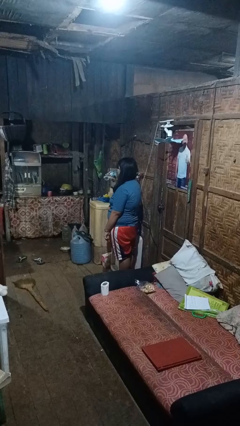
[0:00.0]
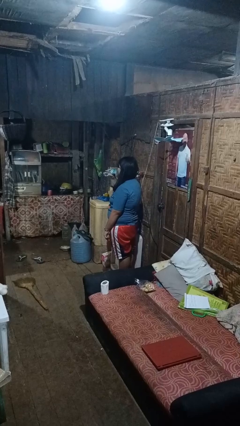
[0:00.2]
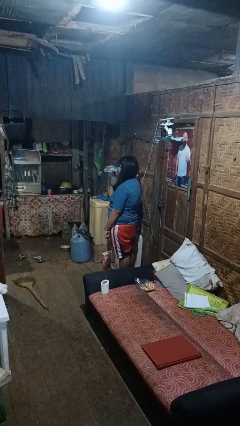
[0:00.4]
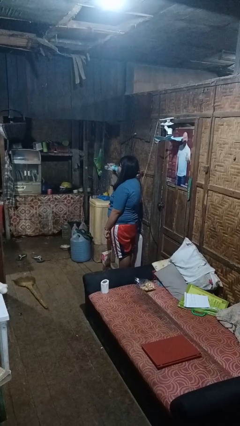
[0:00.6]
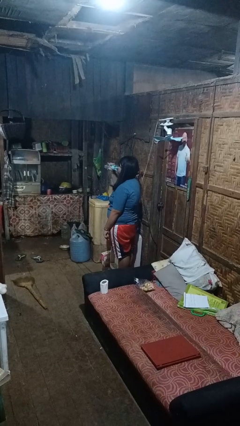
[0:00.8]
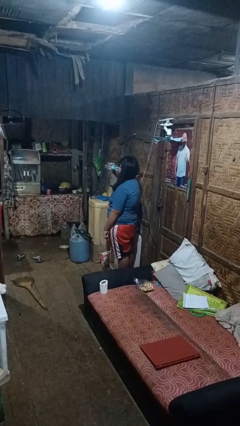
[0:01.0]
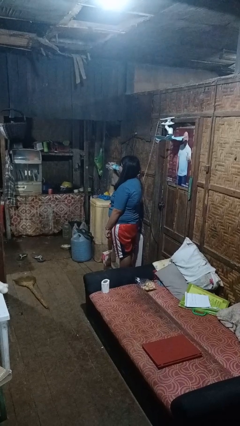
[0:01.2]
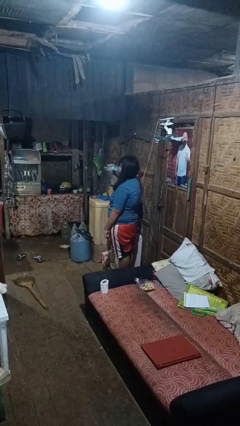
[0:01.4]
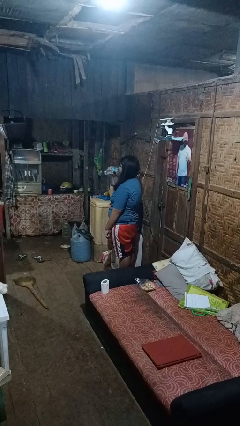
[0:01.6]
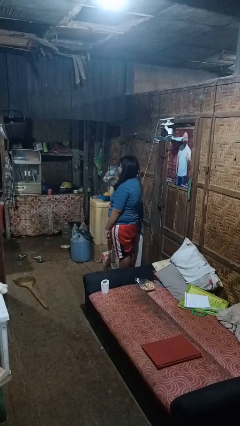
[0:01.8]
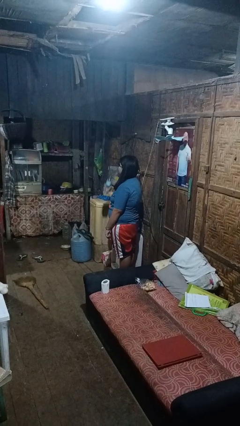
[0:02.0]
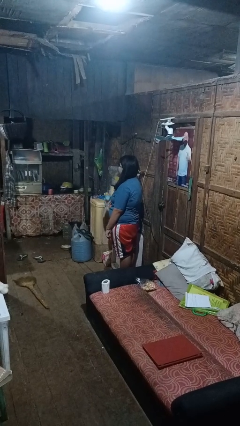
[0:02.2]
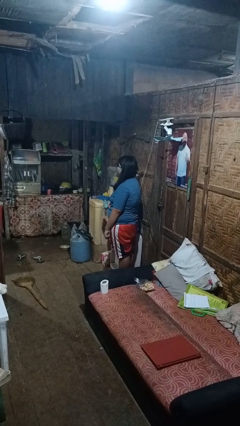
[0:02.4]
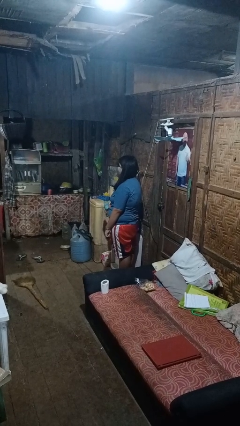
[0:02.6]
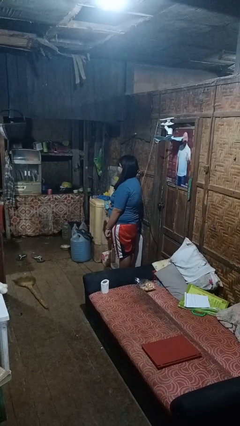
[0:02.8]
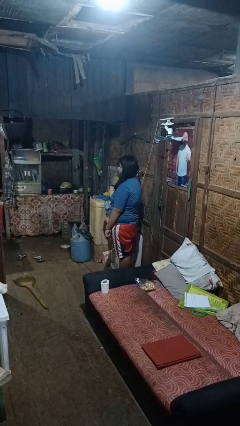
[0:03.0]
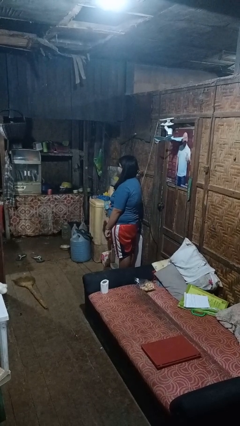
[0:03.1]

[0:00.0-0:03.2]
person drinks from bottle

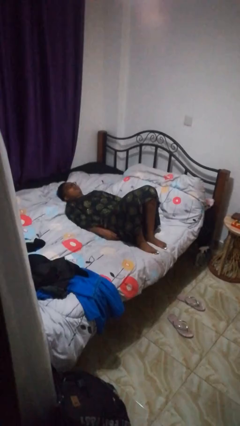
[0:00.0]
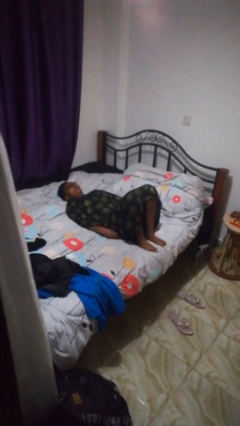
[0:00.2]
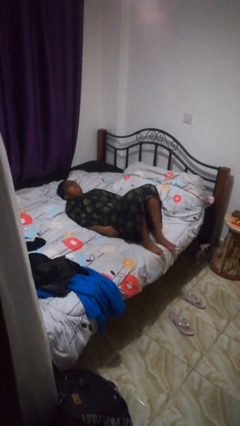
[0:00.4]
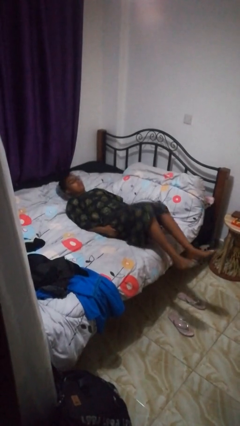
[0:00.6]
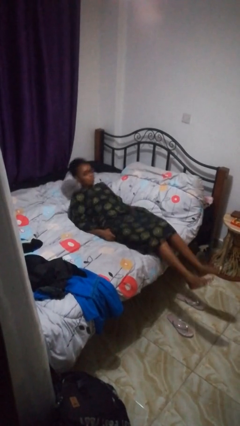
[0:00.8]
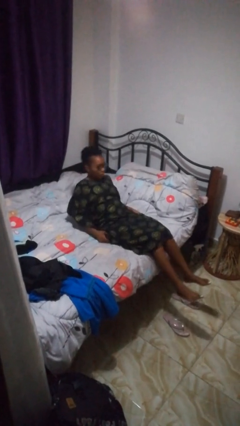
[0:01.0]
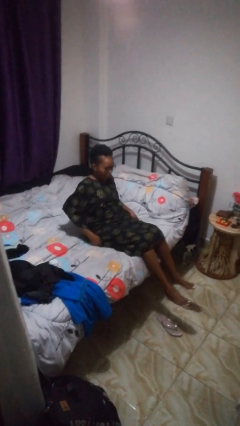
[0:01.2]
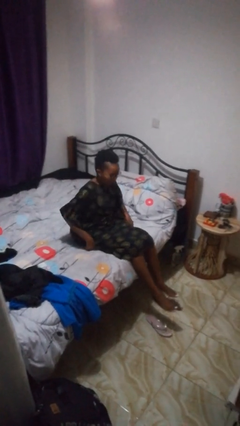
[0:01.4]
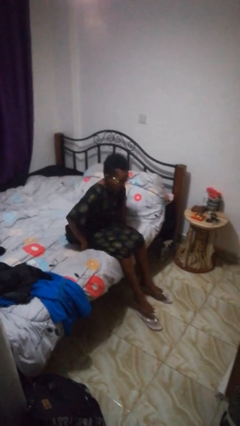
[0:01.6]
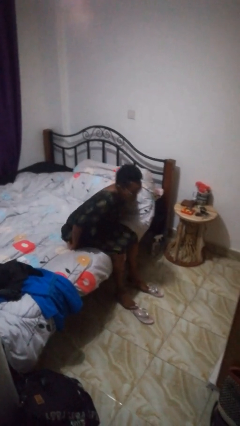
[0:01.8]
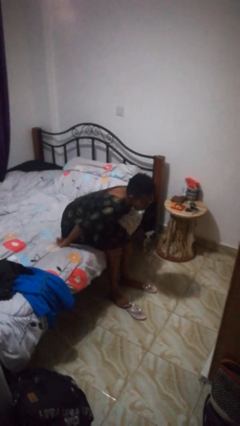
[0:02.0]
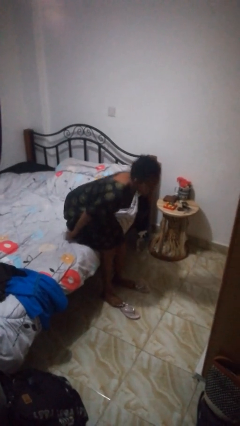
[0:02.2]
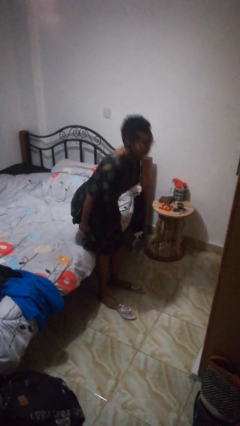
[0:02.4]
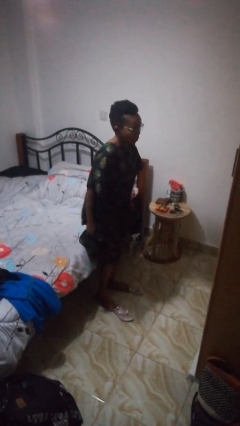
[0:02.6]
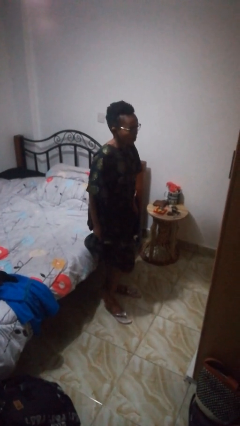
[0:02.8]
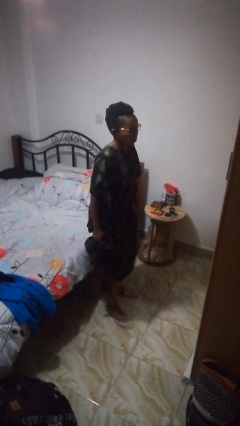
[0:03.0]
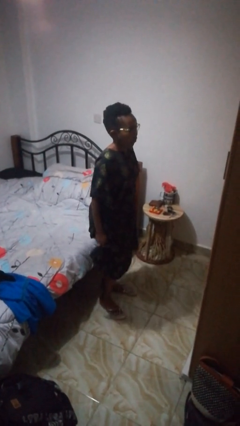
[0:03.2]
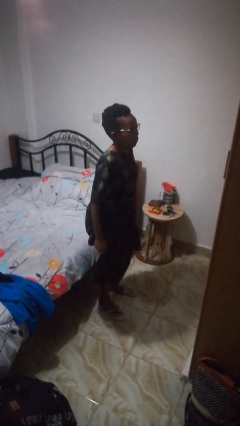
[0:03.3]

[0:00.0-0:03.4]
person stands up

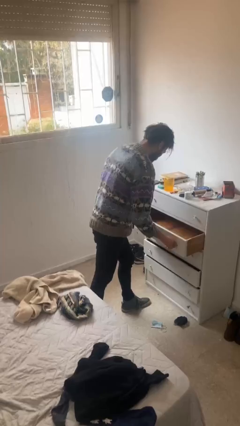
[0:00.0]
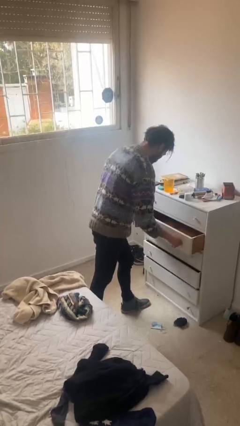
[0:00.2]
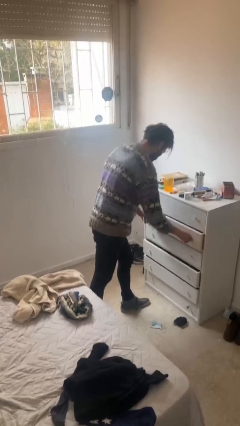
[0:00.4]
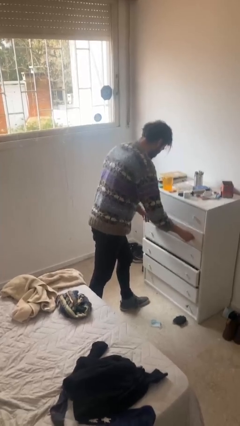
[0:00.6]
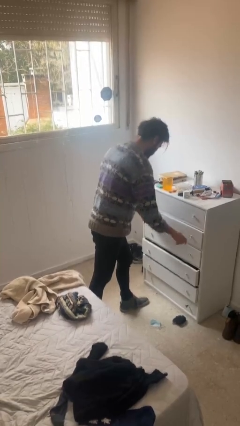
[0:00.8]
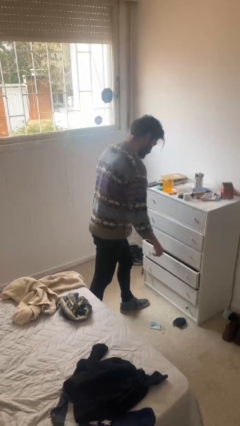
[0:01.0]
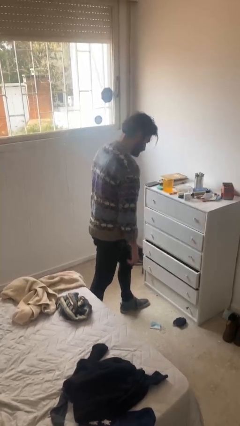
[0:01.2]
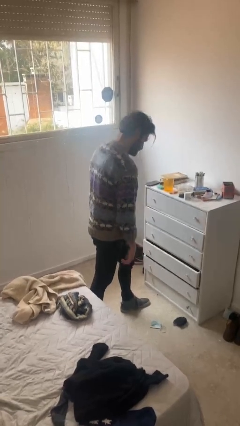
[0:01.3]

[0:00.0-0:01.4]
person closes dresser drawer

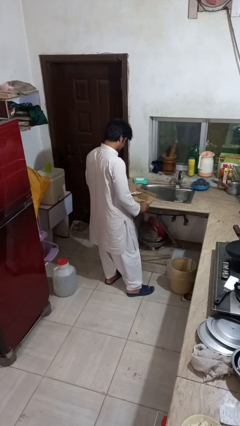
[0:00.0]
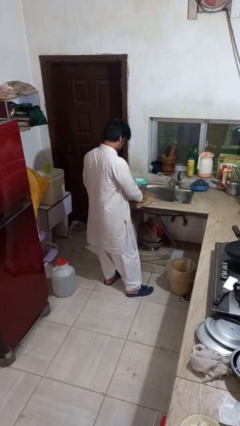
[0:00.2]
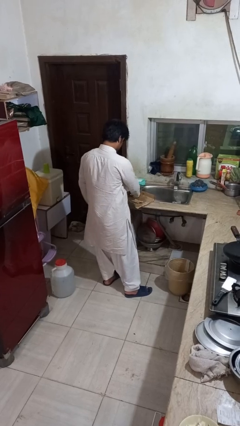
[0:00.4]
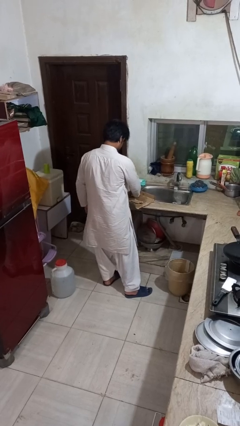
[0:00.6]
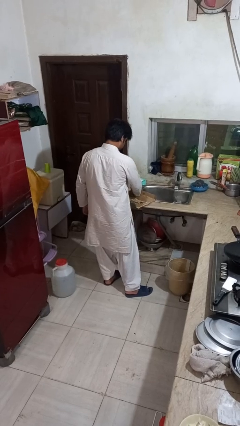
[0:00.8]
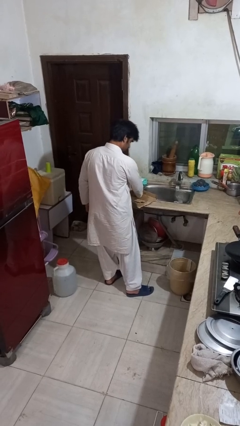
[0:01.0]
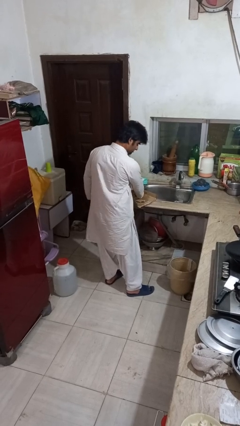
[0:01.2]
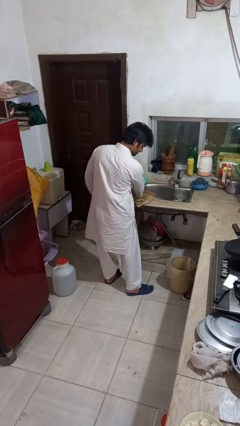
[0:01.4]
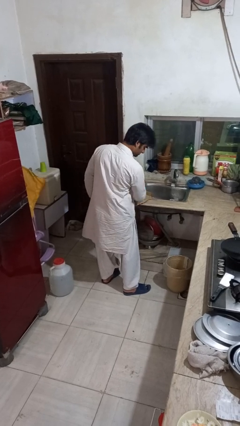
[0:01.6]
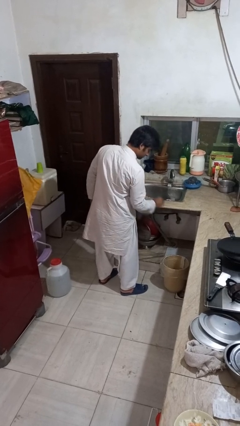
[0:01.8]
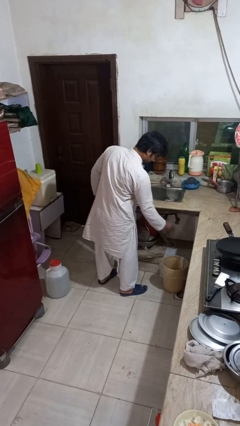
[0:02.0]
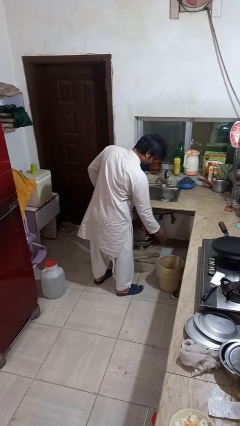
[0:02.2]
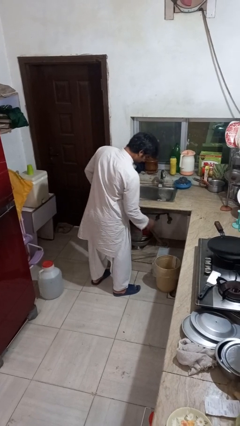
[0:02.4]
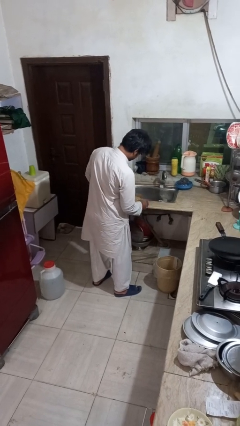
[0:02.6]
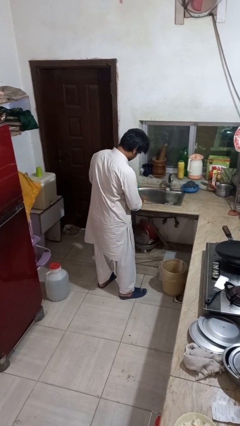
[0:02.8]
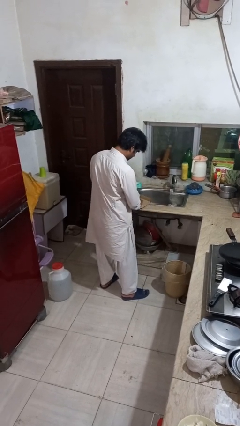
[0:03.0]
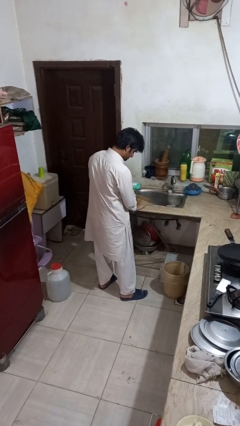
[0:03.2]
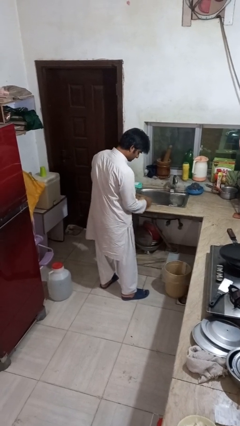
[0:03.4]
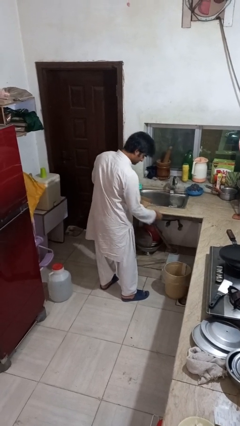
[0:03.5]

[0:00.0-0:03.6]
person discards trash

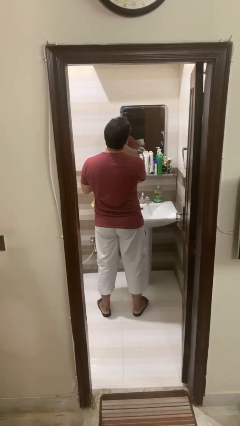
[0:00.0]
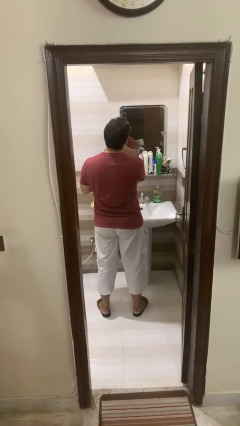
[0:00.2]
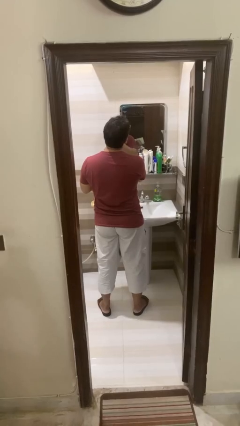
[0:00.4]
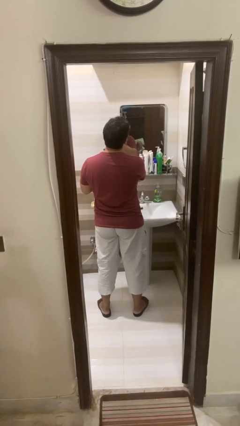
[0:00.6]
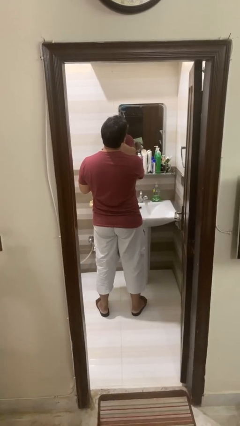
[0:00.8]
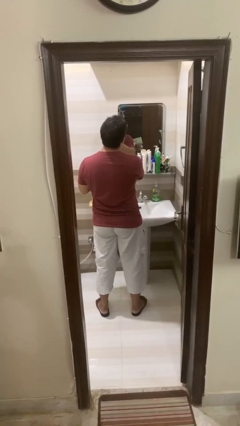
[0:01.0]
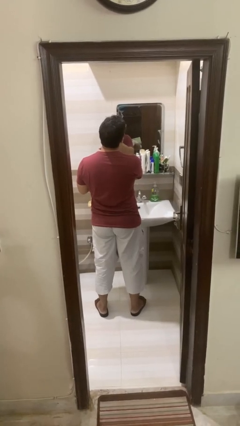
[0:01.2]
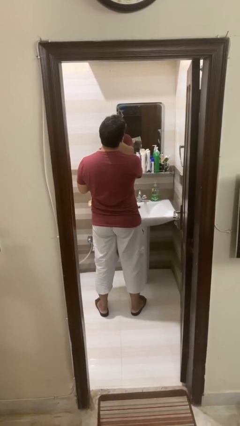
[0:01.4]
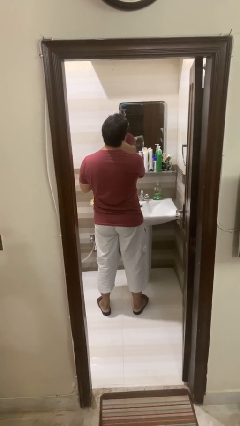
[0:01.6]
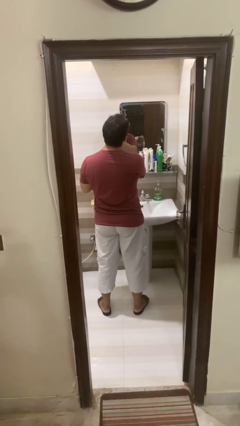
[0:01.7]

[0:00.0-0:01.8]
person shaves face

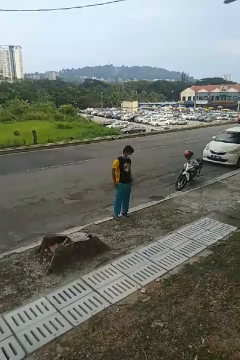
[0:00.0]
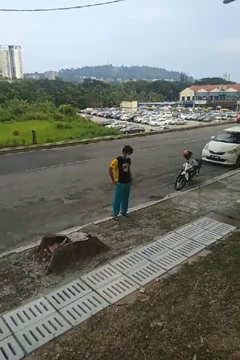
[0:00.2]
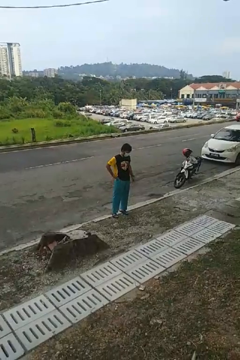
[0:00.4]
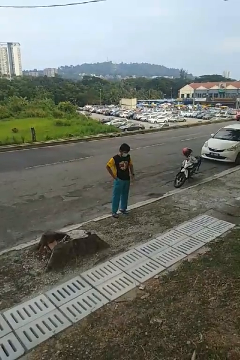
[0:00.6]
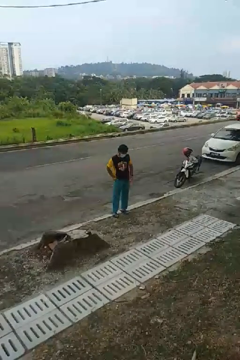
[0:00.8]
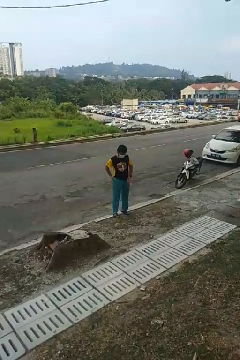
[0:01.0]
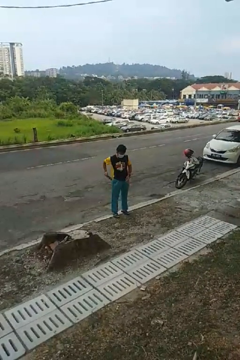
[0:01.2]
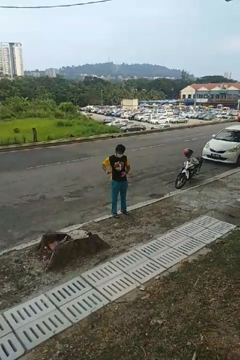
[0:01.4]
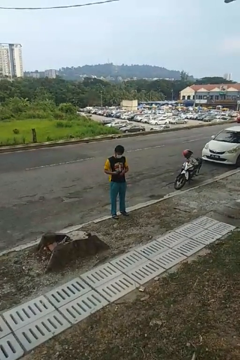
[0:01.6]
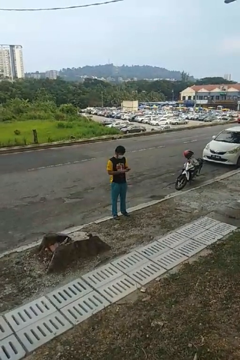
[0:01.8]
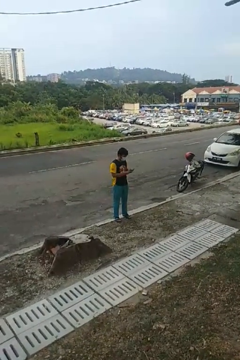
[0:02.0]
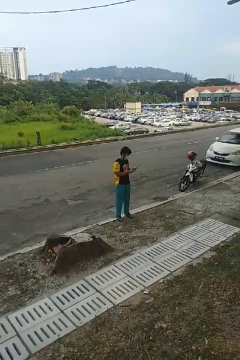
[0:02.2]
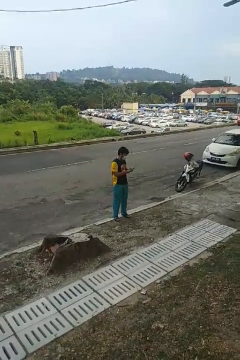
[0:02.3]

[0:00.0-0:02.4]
person takes phone from pocket

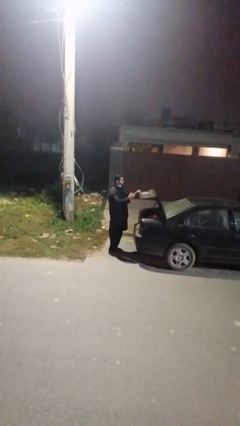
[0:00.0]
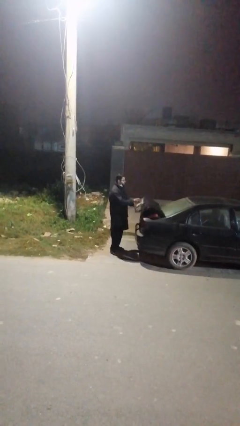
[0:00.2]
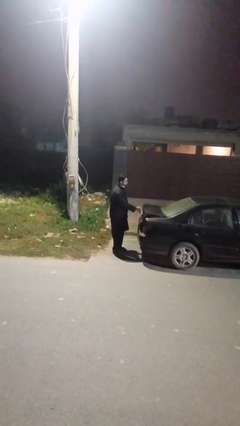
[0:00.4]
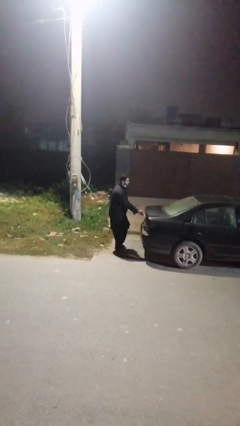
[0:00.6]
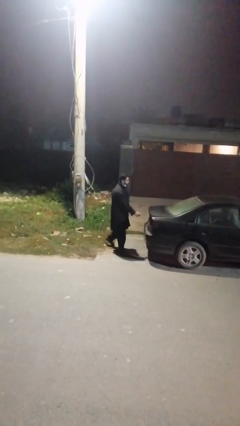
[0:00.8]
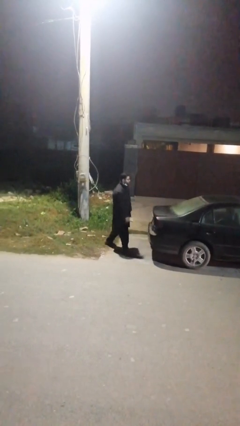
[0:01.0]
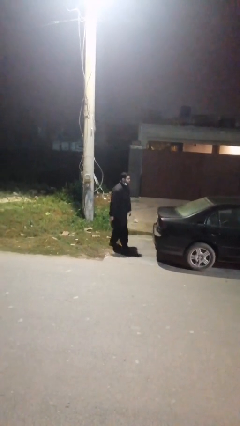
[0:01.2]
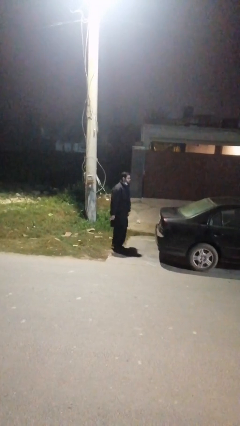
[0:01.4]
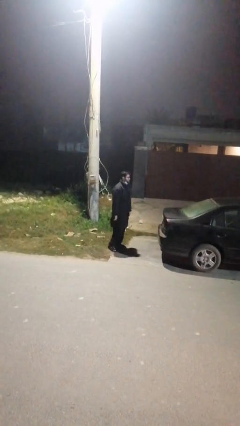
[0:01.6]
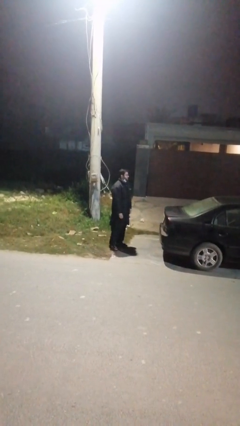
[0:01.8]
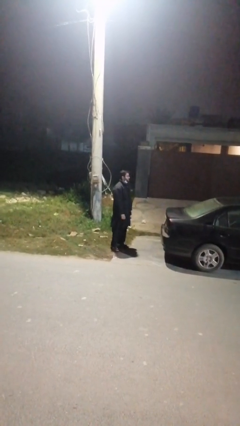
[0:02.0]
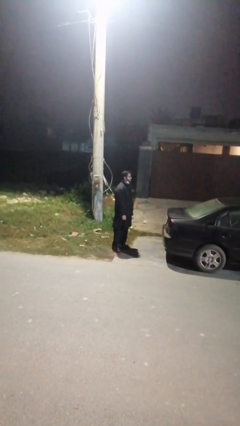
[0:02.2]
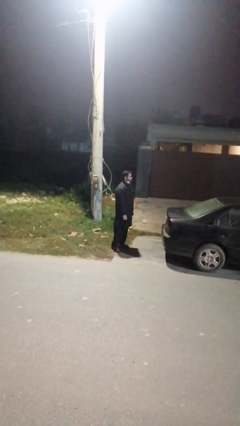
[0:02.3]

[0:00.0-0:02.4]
person closes car trunk
